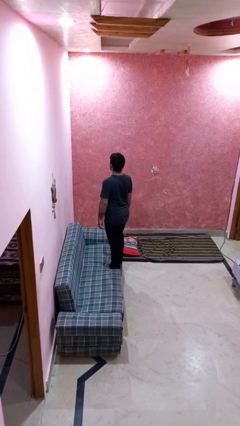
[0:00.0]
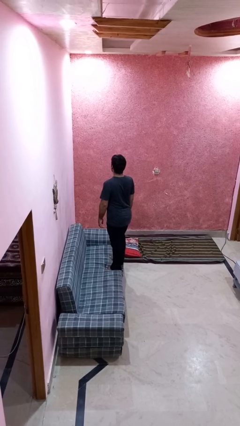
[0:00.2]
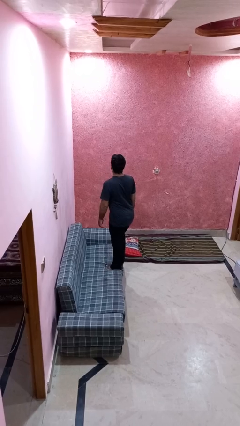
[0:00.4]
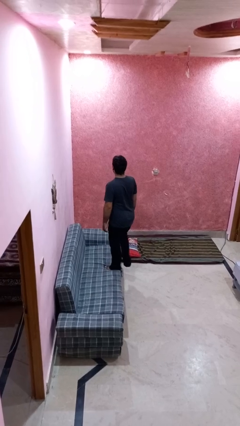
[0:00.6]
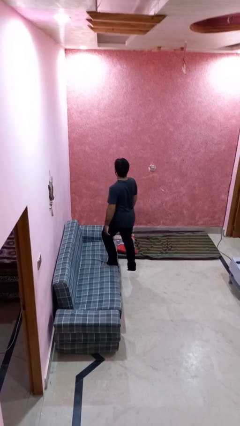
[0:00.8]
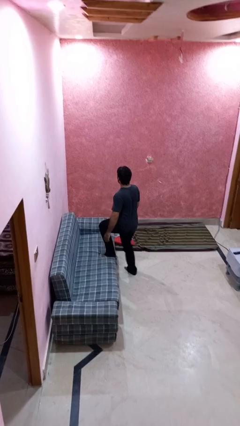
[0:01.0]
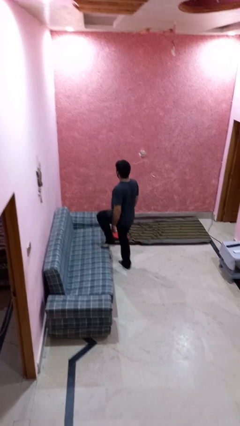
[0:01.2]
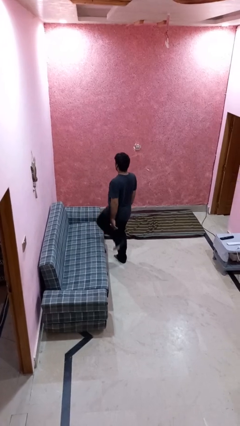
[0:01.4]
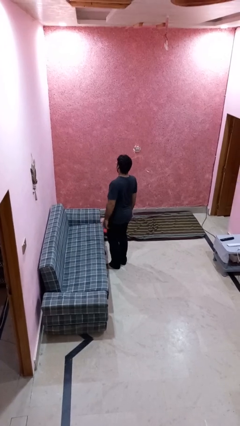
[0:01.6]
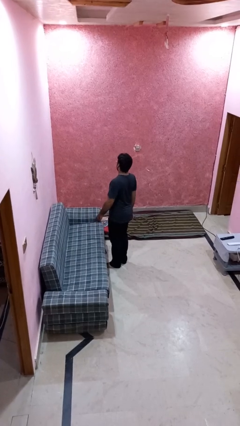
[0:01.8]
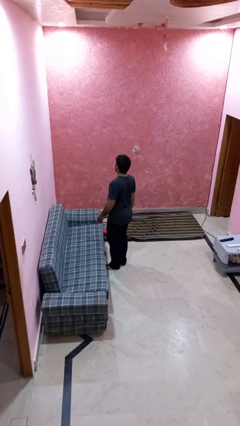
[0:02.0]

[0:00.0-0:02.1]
person climbs off couch

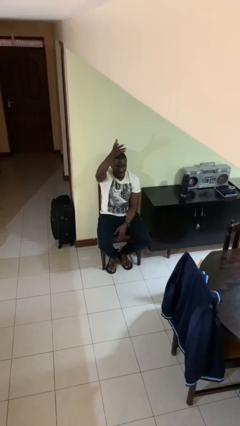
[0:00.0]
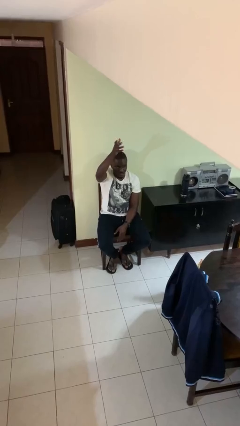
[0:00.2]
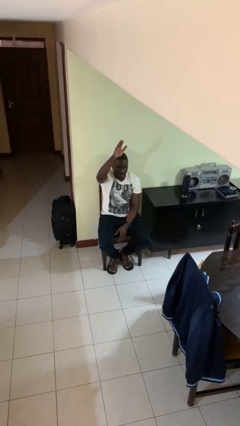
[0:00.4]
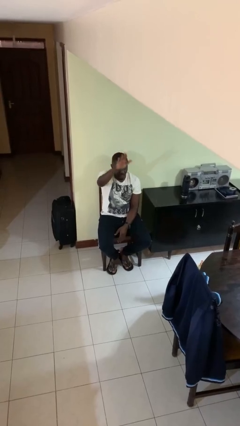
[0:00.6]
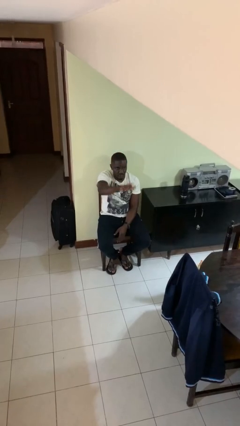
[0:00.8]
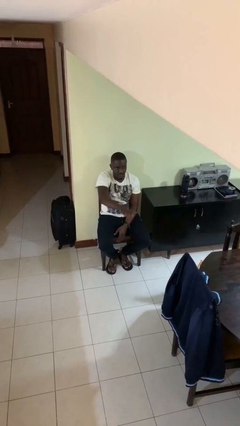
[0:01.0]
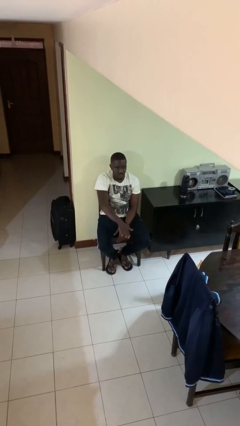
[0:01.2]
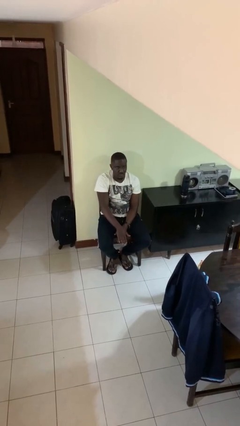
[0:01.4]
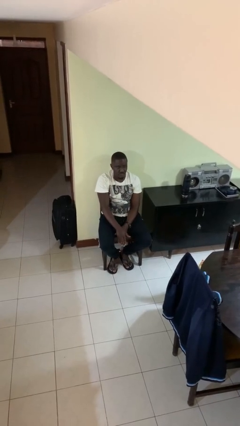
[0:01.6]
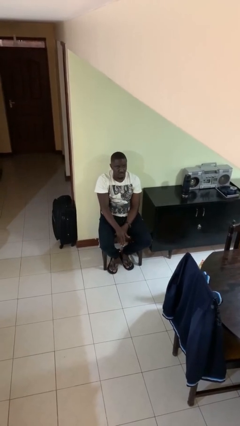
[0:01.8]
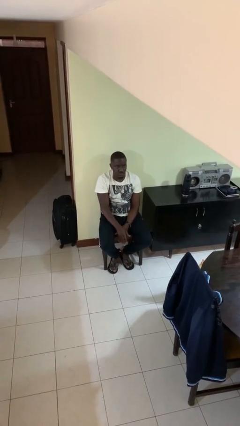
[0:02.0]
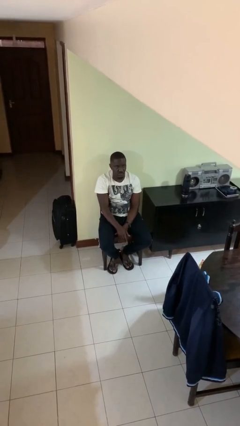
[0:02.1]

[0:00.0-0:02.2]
person gestures swipe down

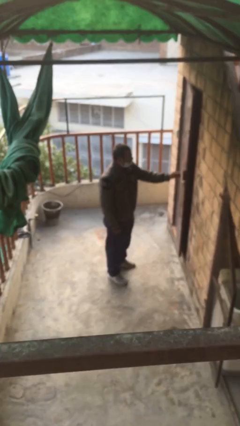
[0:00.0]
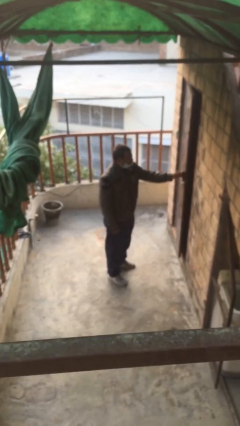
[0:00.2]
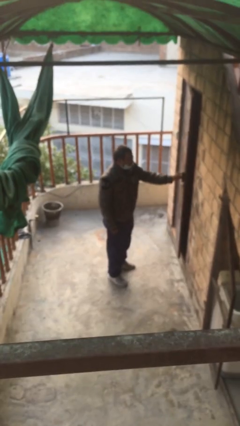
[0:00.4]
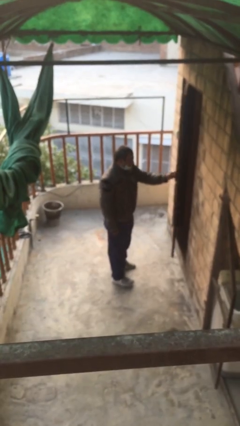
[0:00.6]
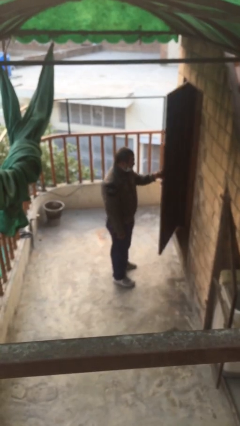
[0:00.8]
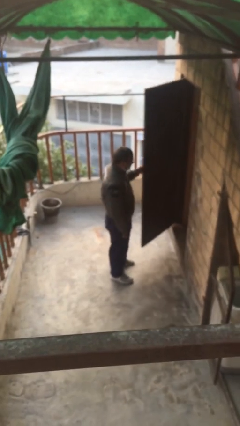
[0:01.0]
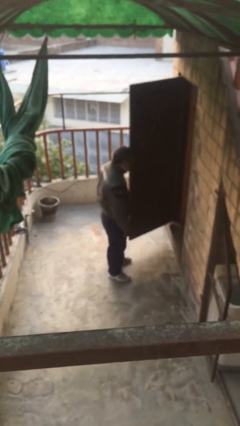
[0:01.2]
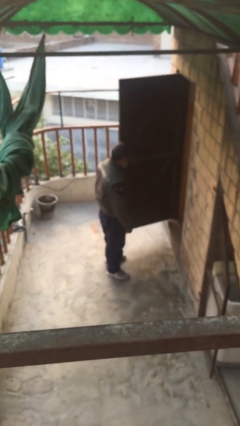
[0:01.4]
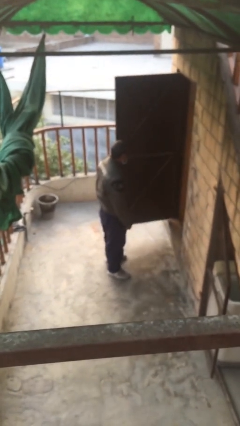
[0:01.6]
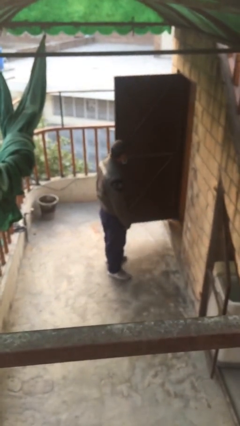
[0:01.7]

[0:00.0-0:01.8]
person opens facility door

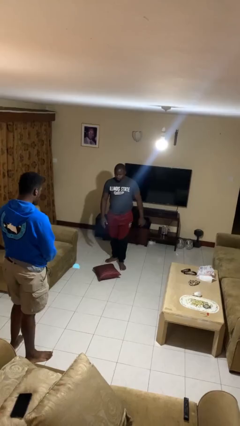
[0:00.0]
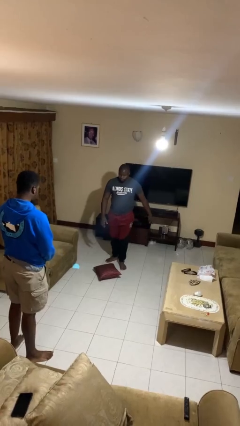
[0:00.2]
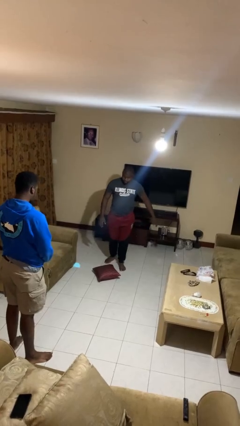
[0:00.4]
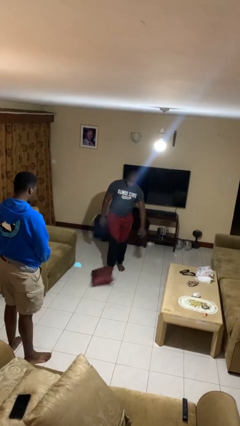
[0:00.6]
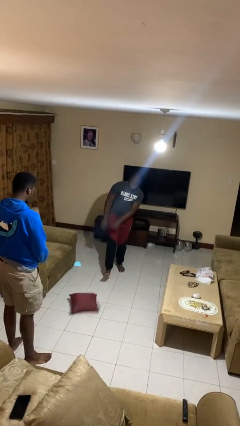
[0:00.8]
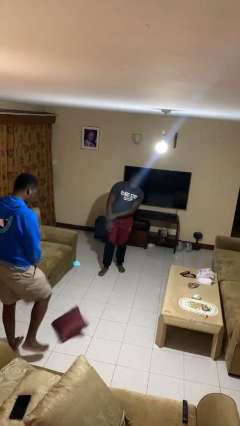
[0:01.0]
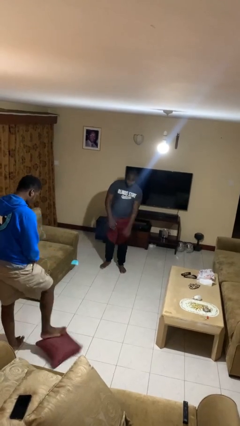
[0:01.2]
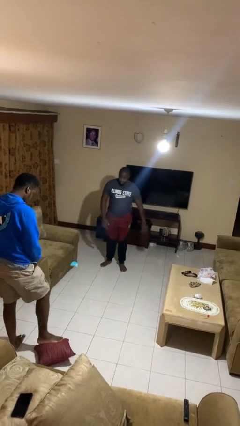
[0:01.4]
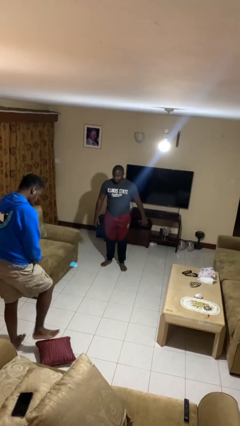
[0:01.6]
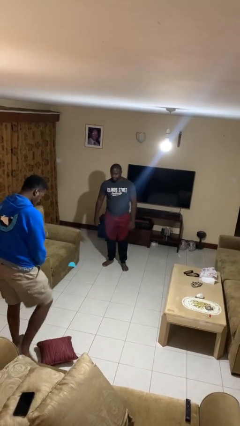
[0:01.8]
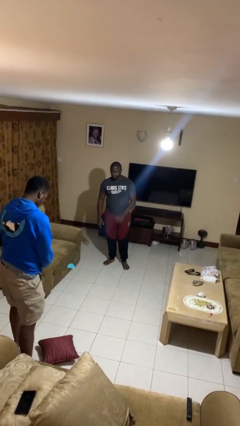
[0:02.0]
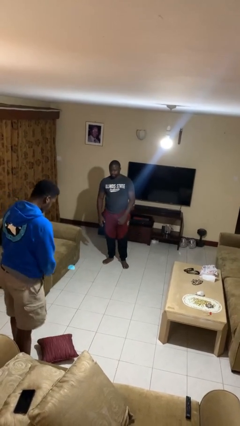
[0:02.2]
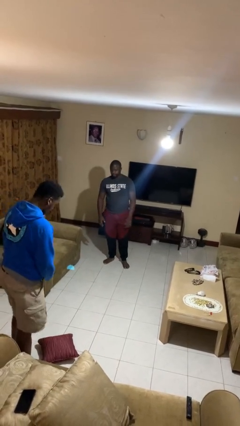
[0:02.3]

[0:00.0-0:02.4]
person kicks object to person

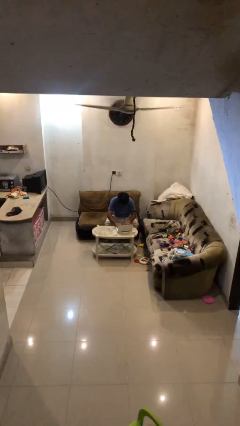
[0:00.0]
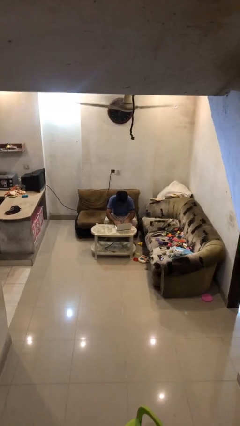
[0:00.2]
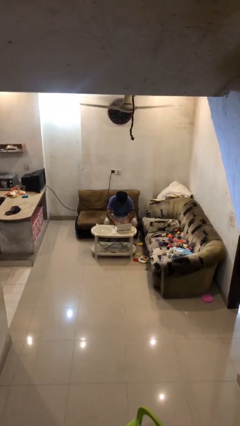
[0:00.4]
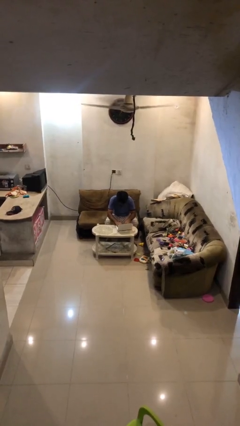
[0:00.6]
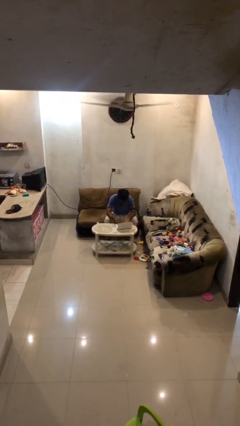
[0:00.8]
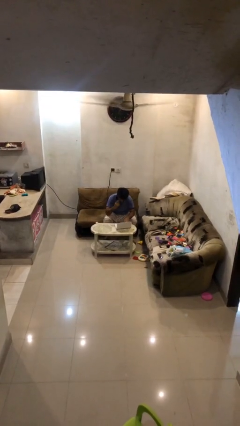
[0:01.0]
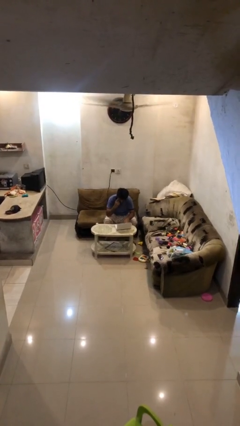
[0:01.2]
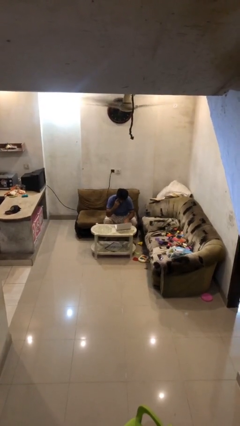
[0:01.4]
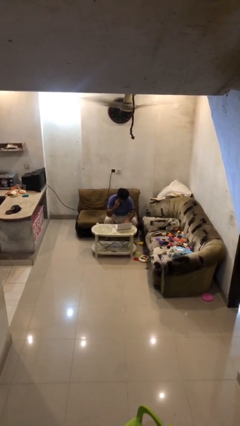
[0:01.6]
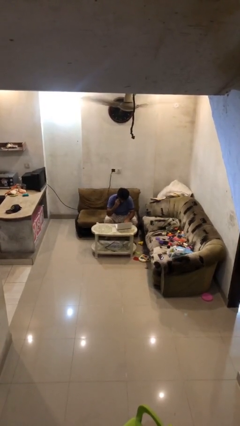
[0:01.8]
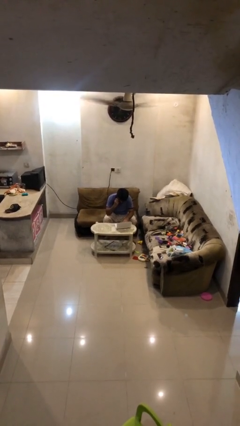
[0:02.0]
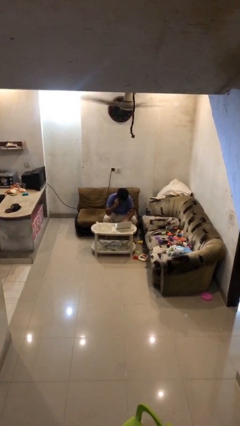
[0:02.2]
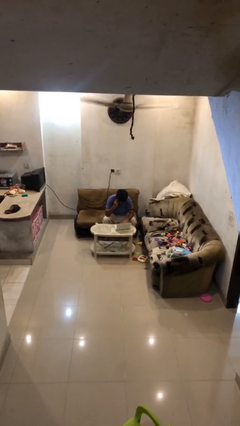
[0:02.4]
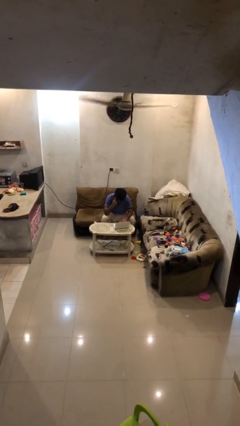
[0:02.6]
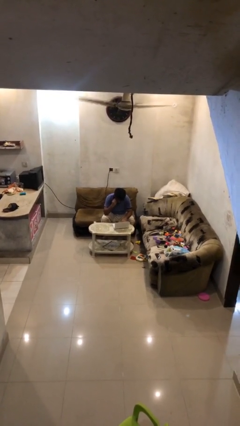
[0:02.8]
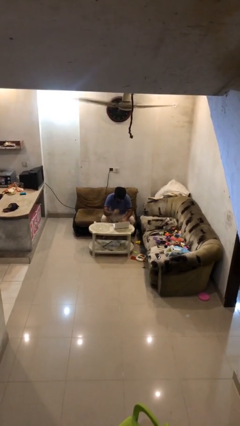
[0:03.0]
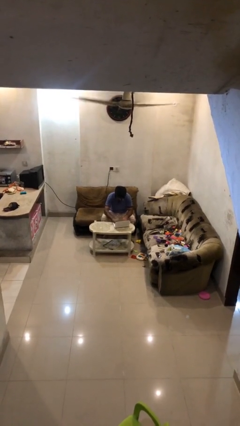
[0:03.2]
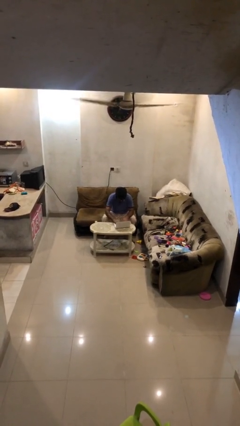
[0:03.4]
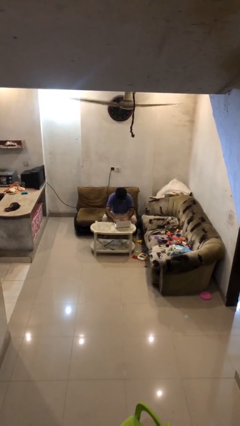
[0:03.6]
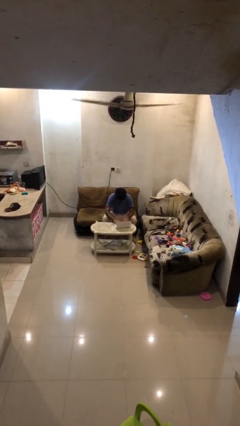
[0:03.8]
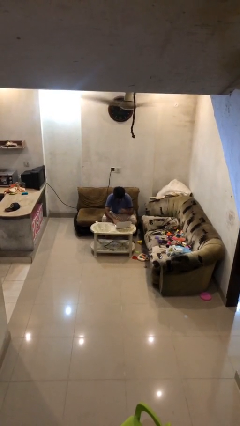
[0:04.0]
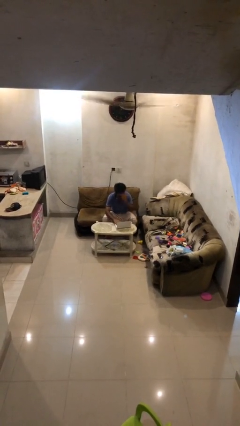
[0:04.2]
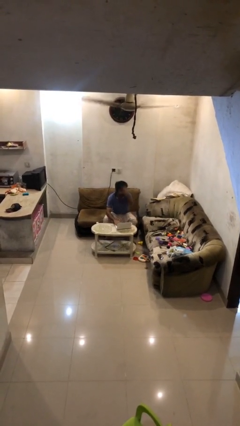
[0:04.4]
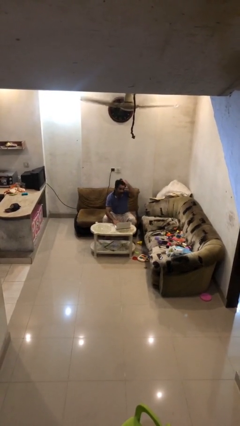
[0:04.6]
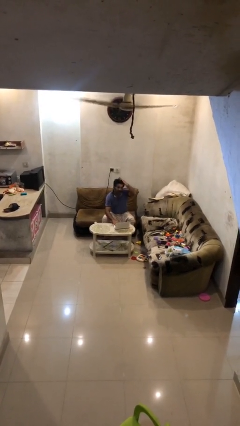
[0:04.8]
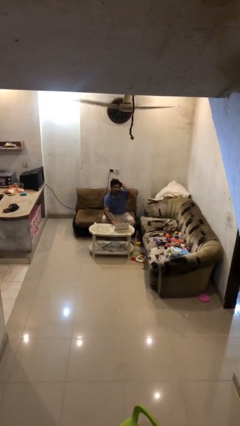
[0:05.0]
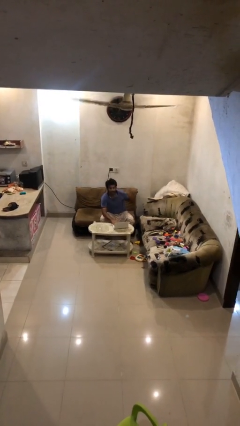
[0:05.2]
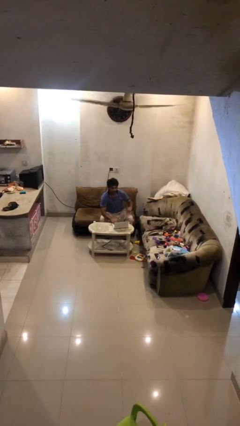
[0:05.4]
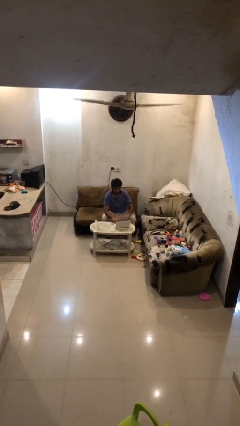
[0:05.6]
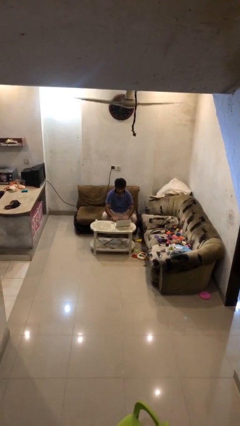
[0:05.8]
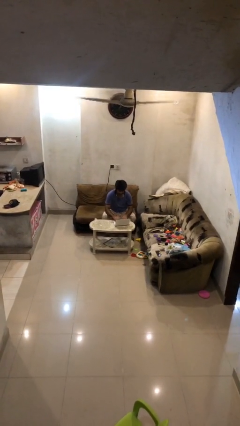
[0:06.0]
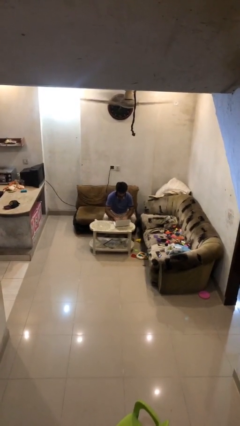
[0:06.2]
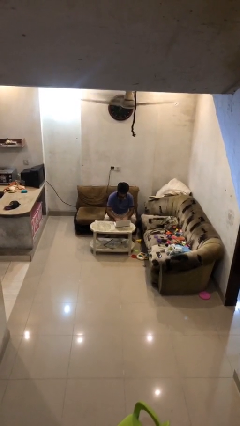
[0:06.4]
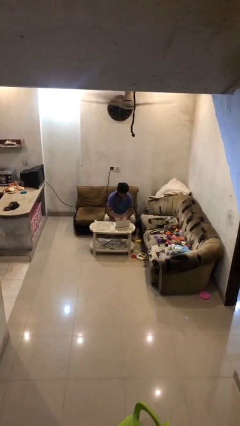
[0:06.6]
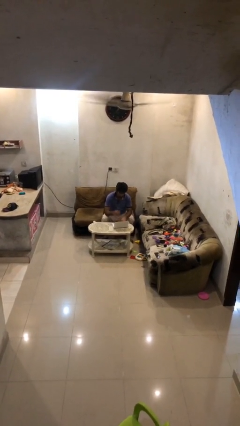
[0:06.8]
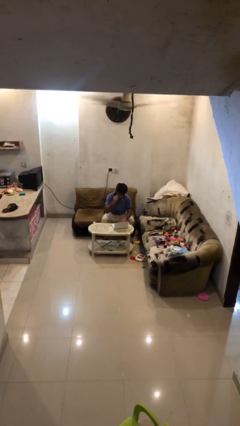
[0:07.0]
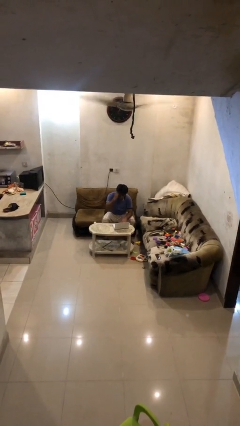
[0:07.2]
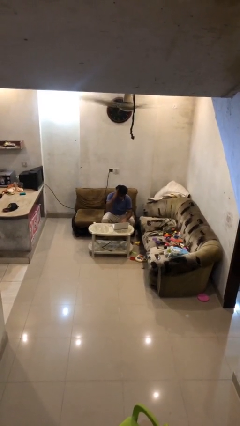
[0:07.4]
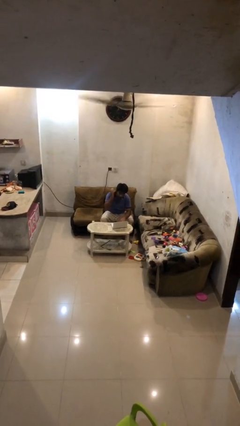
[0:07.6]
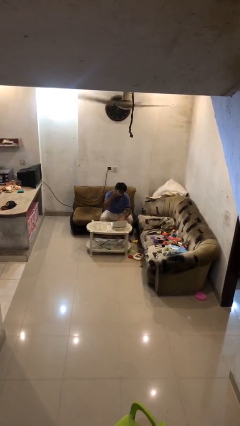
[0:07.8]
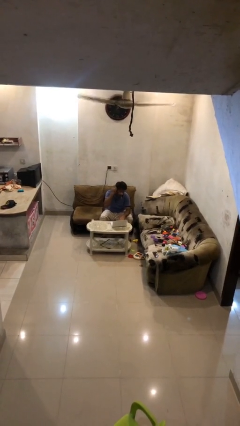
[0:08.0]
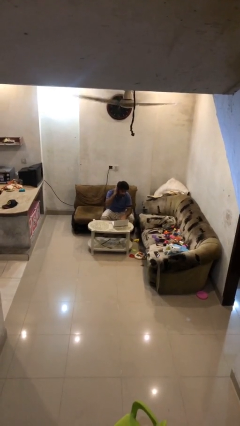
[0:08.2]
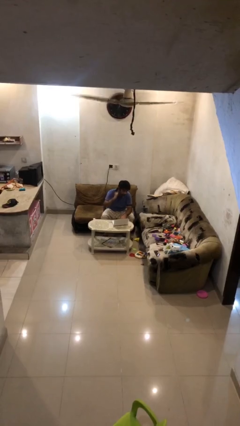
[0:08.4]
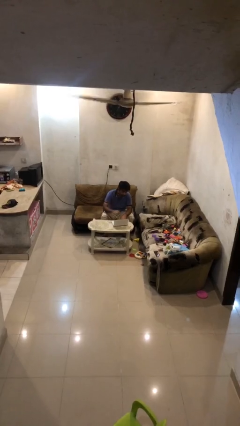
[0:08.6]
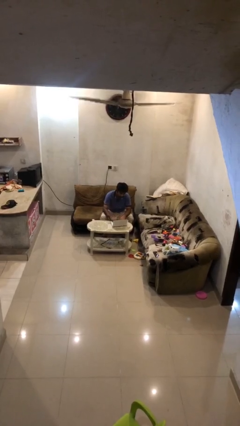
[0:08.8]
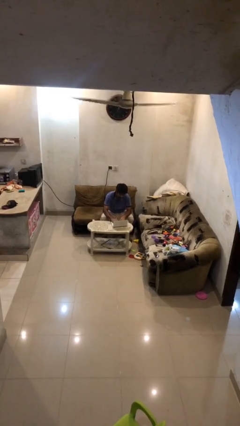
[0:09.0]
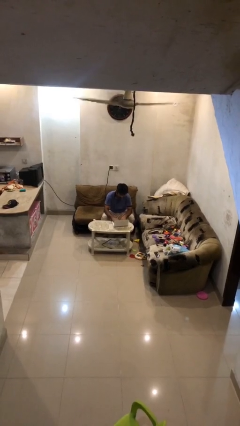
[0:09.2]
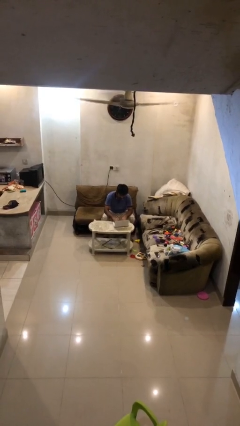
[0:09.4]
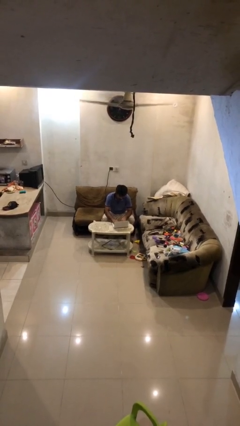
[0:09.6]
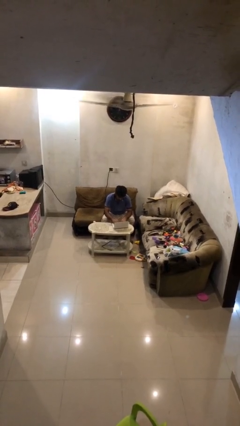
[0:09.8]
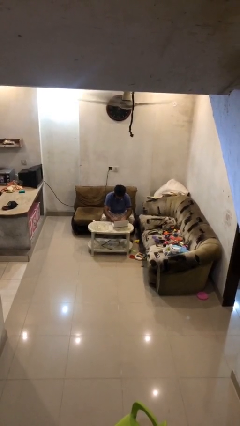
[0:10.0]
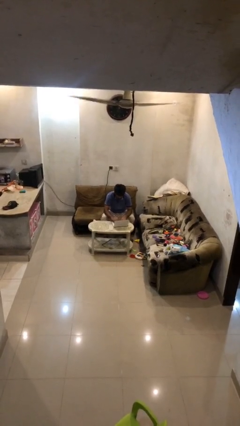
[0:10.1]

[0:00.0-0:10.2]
person interacts with laptop
